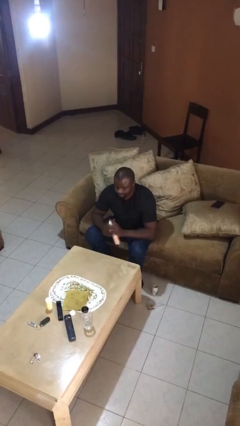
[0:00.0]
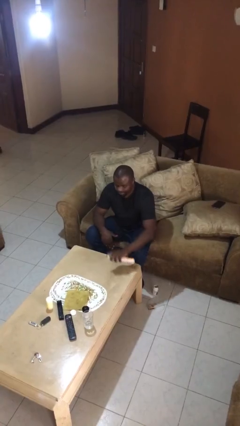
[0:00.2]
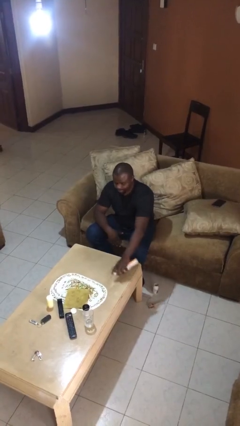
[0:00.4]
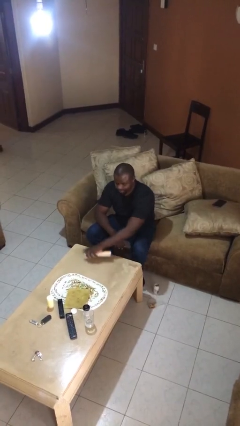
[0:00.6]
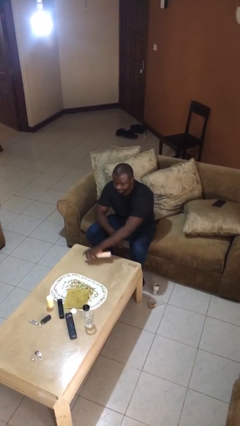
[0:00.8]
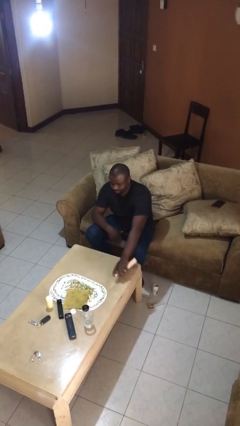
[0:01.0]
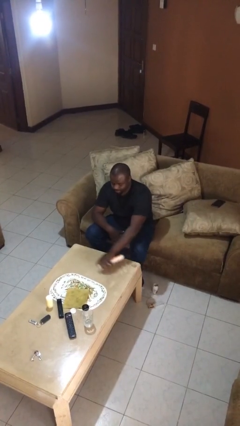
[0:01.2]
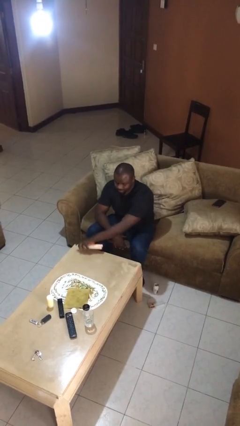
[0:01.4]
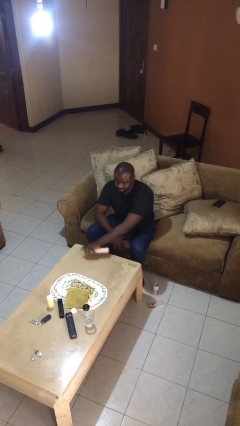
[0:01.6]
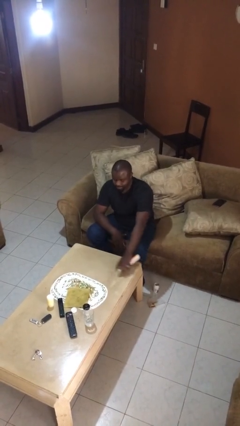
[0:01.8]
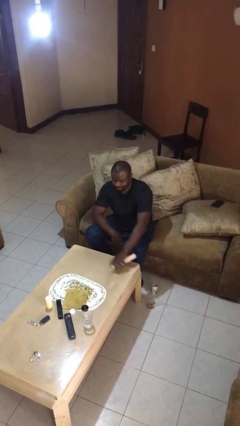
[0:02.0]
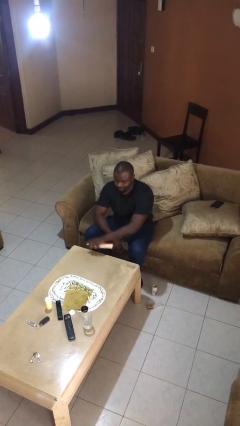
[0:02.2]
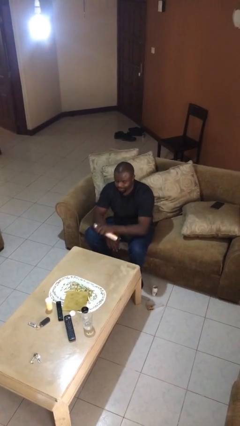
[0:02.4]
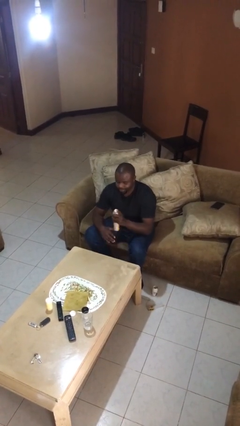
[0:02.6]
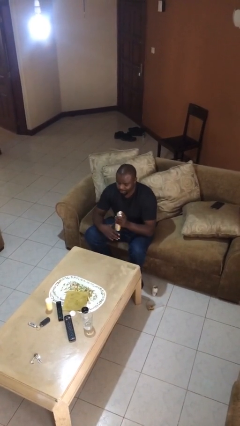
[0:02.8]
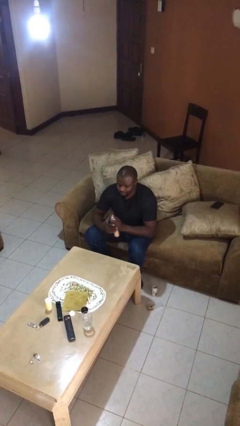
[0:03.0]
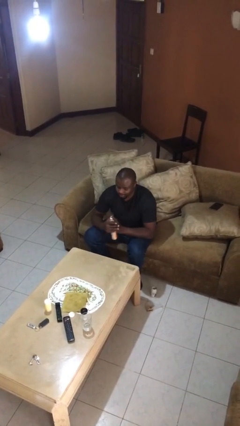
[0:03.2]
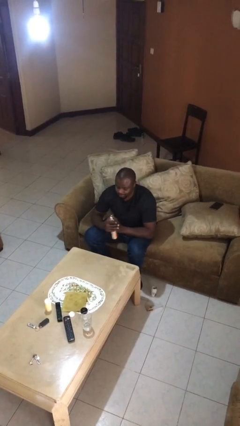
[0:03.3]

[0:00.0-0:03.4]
person sprays from bottle

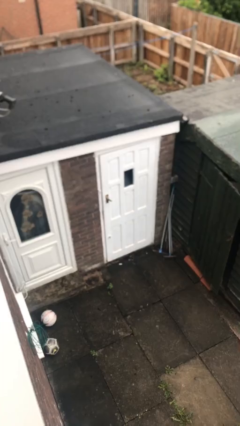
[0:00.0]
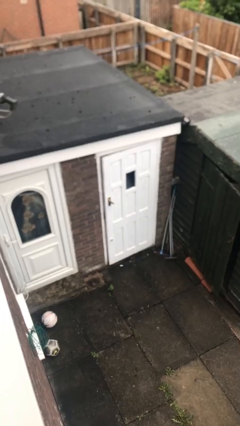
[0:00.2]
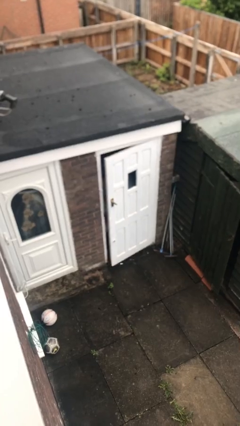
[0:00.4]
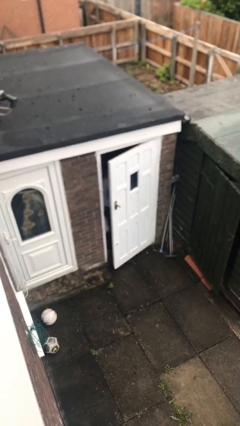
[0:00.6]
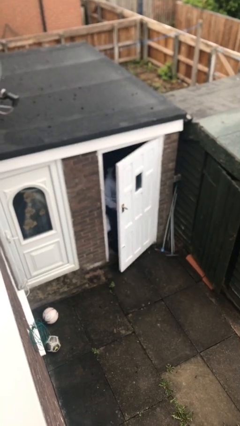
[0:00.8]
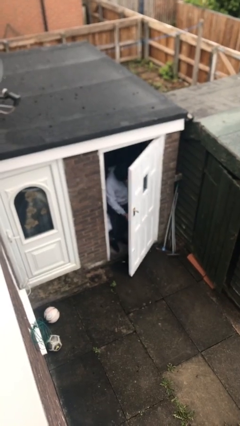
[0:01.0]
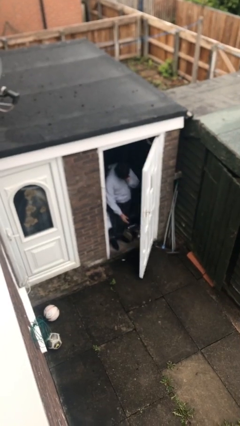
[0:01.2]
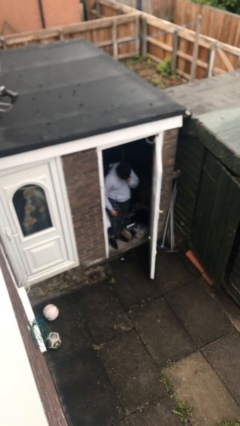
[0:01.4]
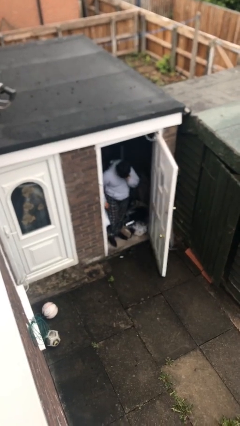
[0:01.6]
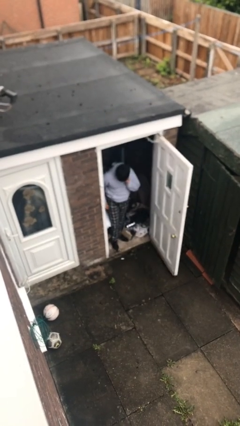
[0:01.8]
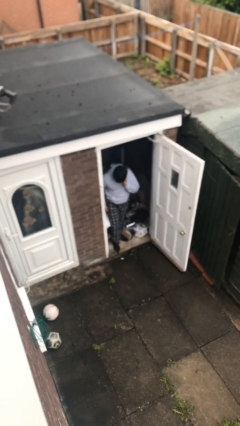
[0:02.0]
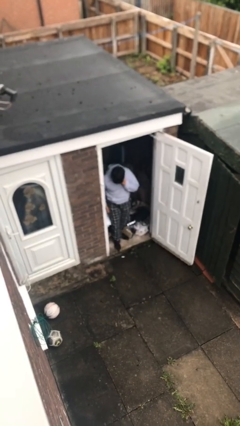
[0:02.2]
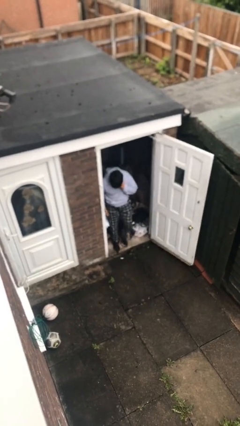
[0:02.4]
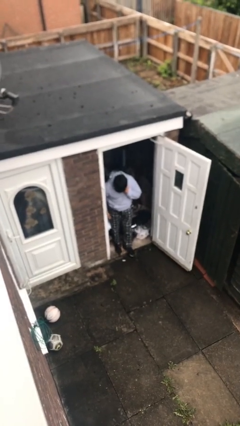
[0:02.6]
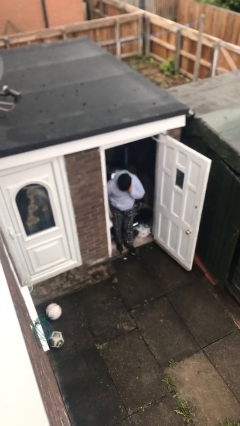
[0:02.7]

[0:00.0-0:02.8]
person opens facility door

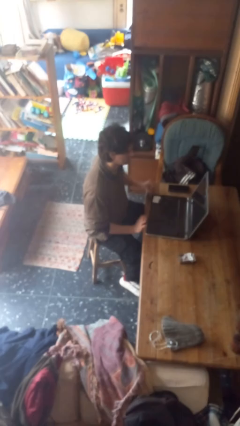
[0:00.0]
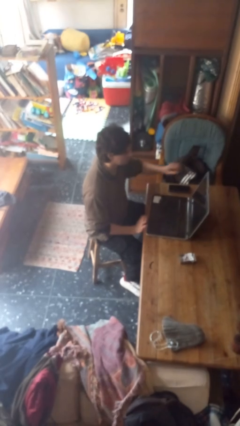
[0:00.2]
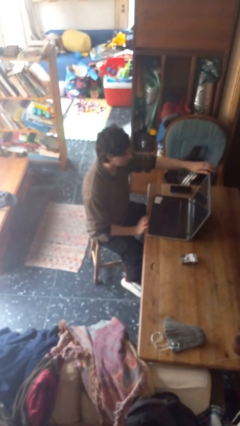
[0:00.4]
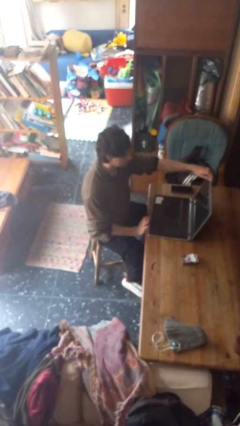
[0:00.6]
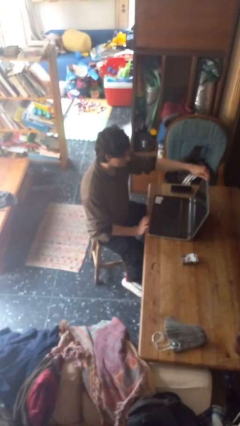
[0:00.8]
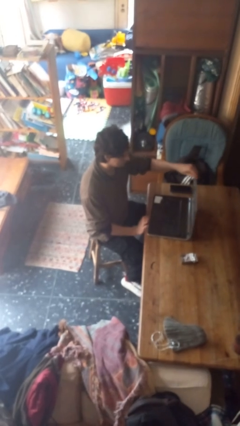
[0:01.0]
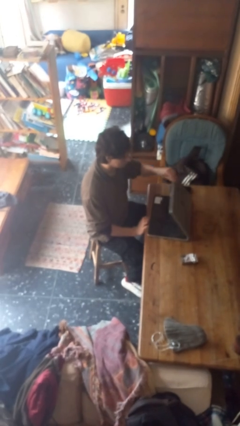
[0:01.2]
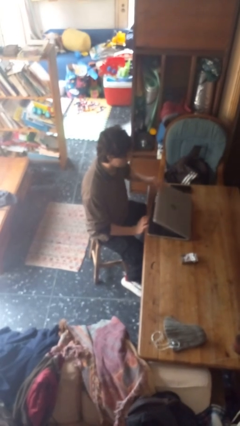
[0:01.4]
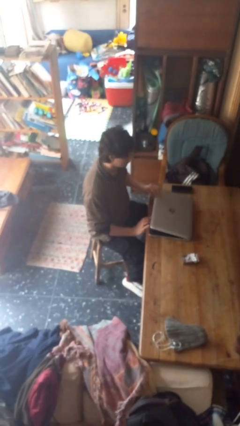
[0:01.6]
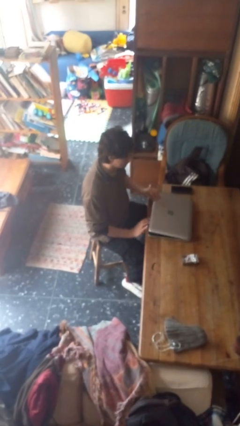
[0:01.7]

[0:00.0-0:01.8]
person closes laptop

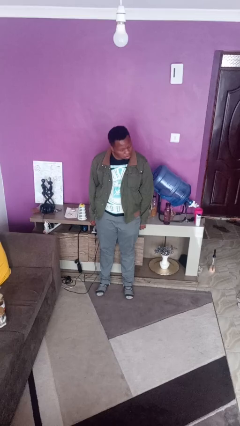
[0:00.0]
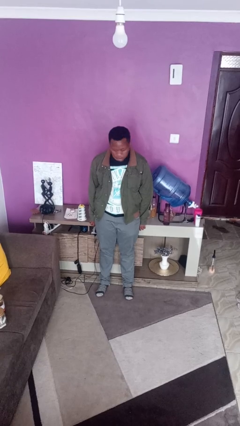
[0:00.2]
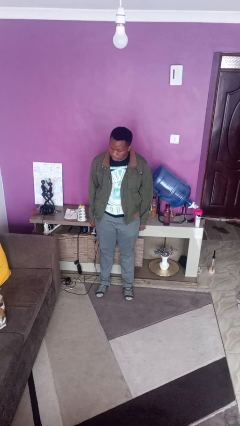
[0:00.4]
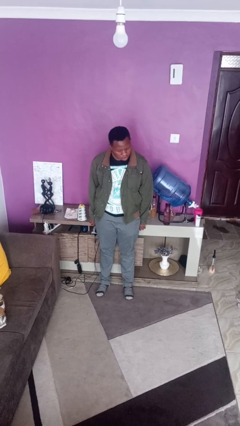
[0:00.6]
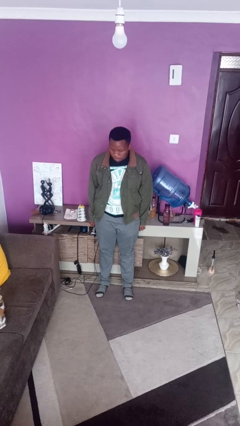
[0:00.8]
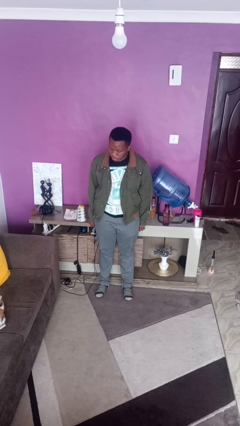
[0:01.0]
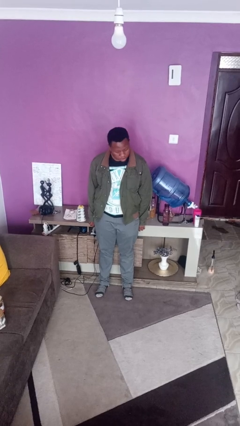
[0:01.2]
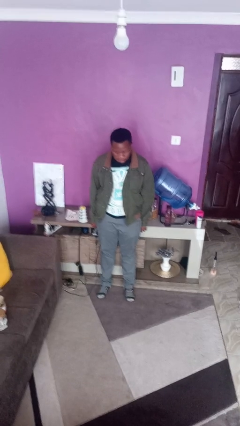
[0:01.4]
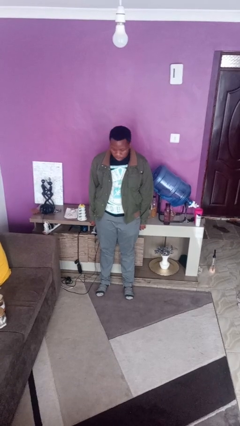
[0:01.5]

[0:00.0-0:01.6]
person shakes head

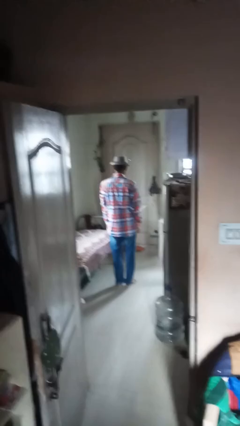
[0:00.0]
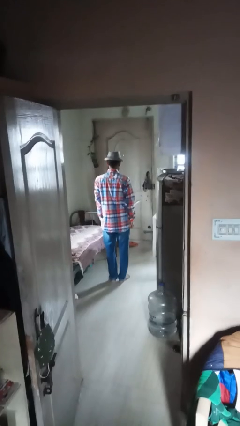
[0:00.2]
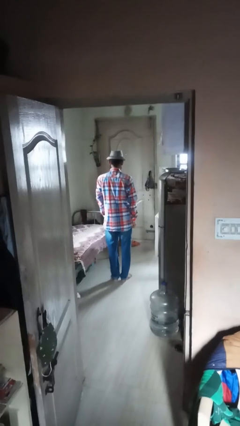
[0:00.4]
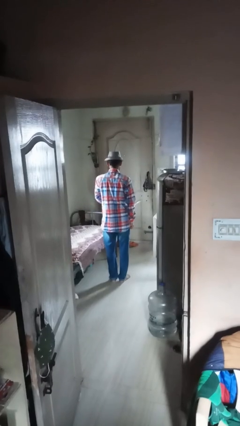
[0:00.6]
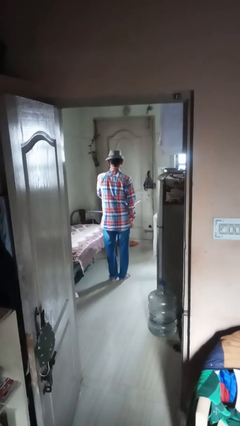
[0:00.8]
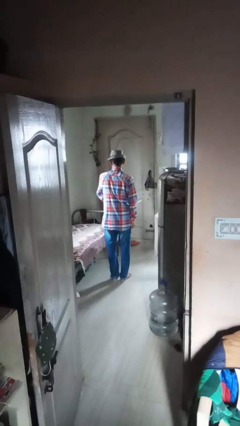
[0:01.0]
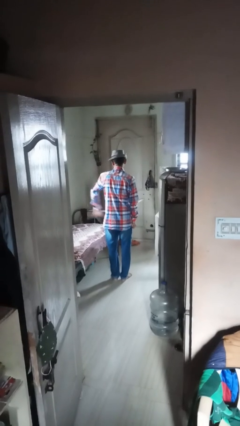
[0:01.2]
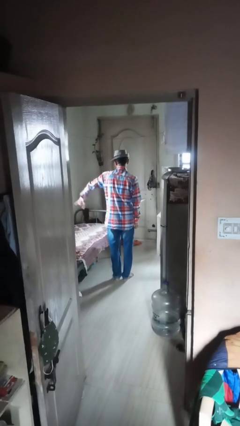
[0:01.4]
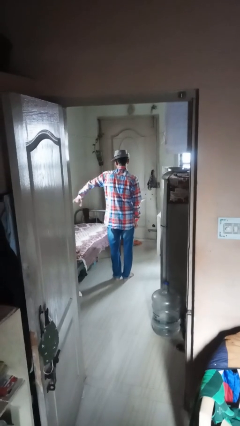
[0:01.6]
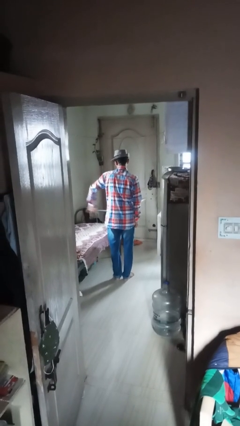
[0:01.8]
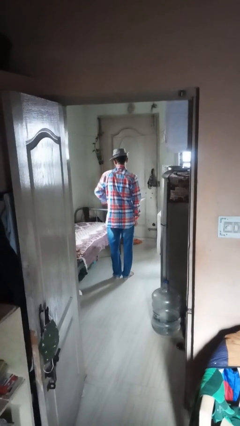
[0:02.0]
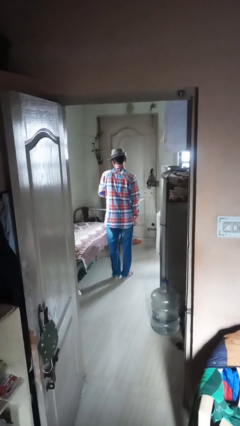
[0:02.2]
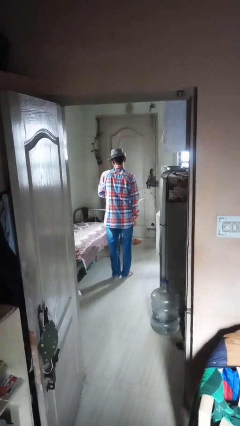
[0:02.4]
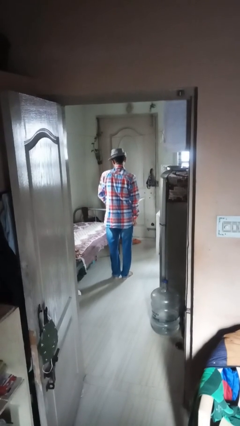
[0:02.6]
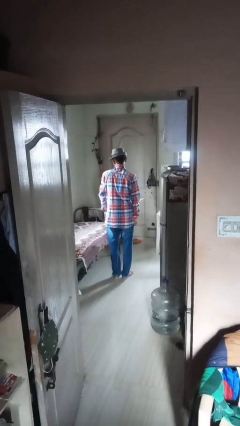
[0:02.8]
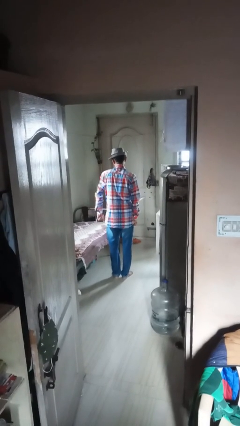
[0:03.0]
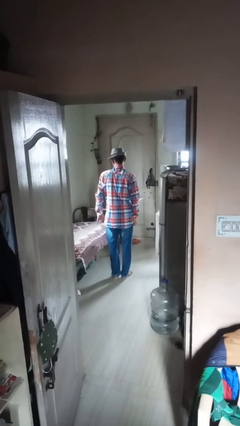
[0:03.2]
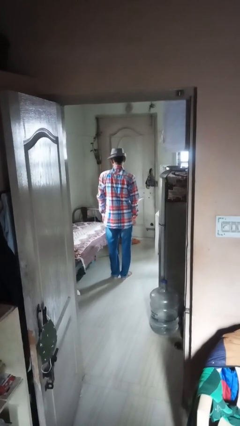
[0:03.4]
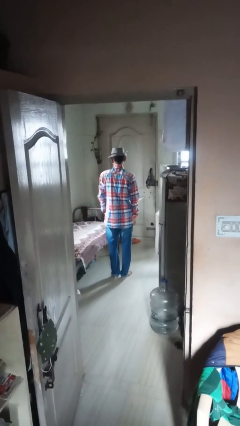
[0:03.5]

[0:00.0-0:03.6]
person gestures hang loose

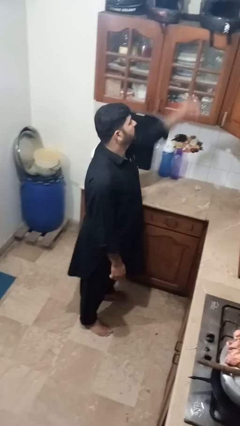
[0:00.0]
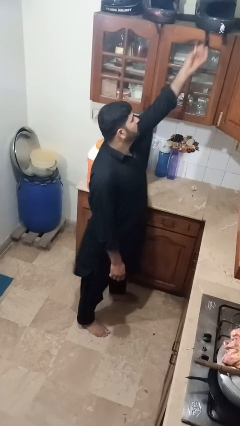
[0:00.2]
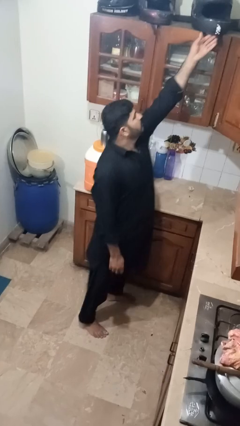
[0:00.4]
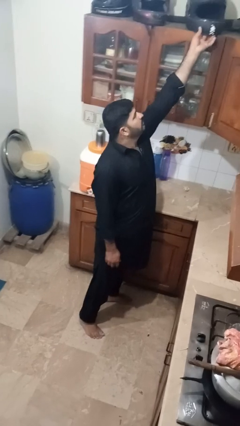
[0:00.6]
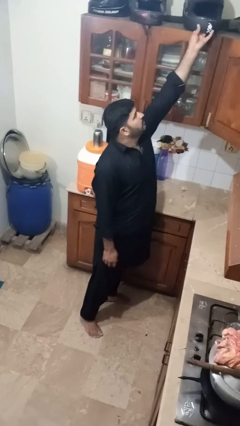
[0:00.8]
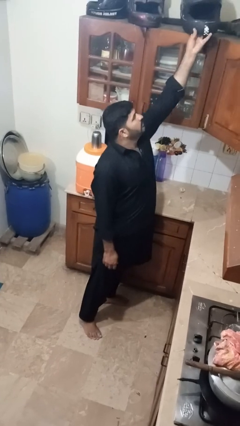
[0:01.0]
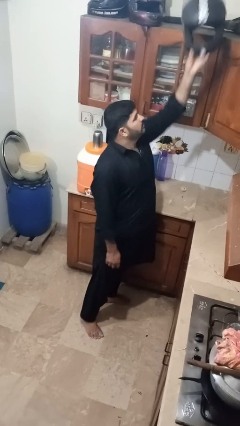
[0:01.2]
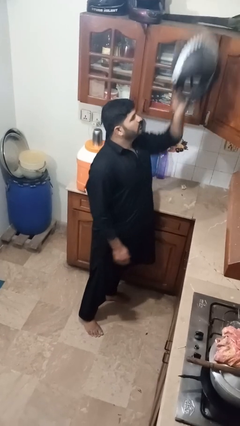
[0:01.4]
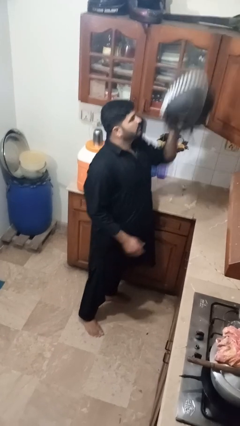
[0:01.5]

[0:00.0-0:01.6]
person picks up object from shelf

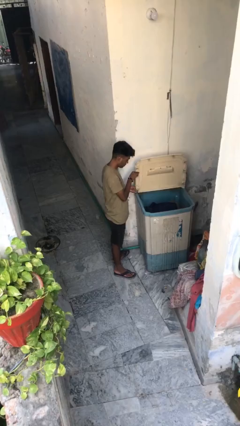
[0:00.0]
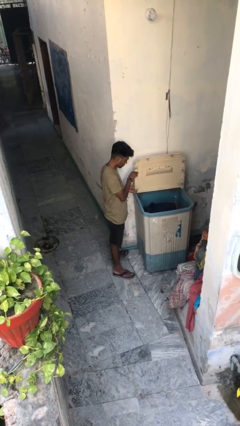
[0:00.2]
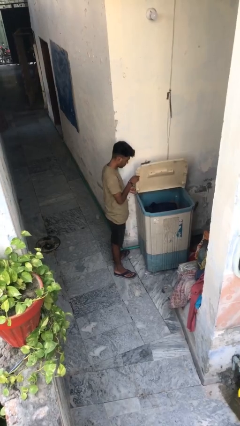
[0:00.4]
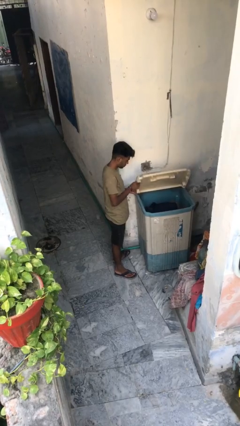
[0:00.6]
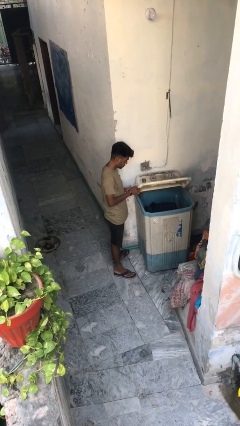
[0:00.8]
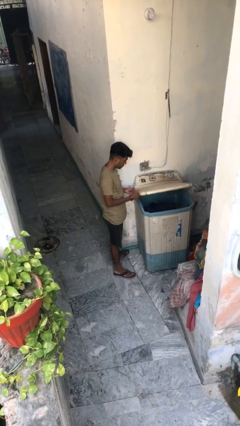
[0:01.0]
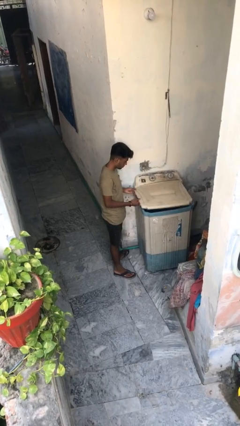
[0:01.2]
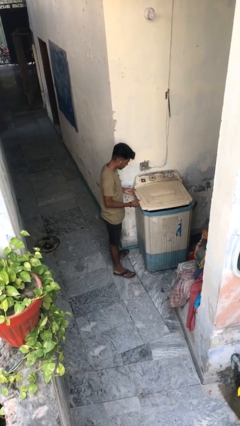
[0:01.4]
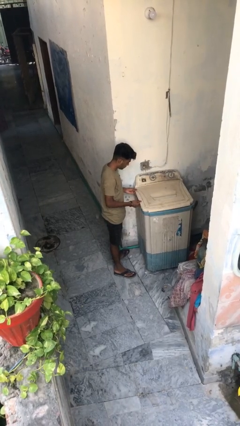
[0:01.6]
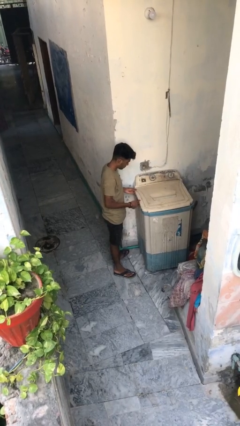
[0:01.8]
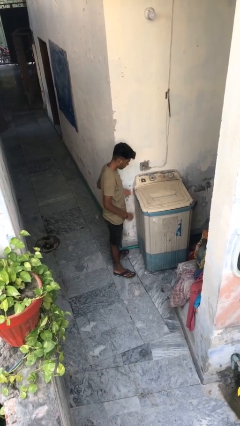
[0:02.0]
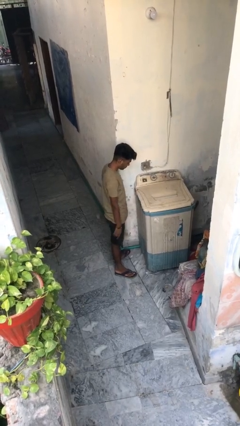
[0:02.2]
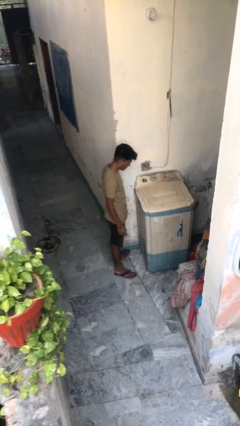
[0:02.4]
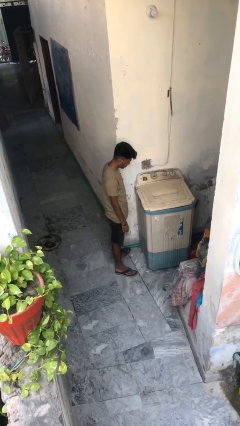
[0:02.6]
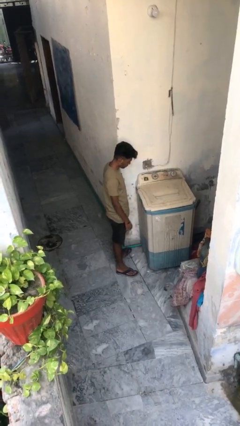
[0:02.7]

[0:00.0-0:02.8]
person closes clothes washer
